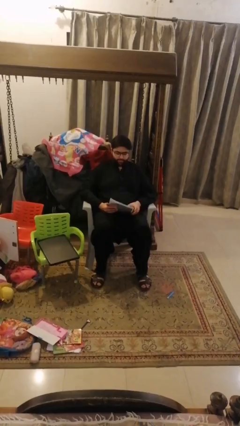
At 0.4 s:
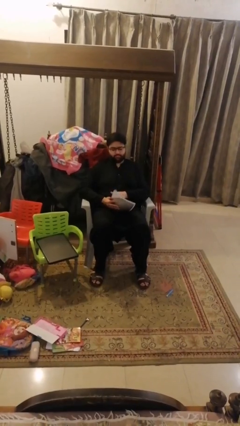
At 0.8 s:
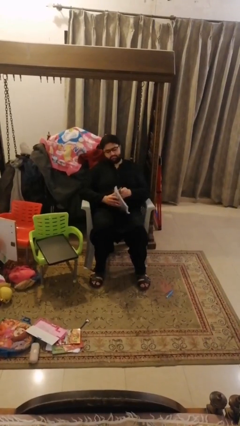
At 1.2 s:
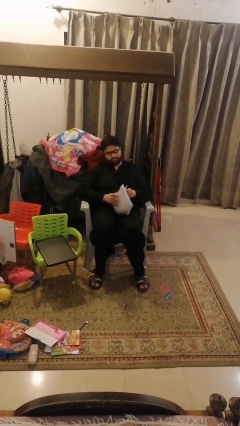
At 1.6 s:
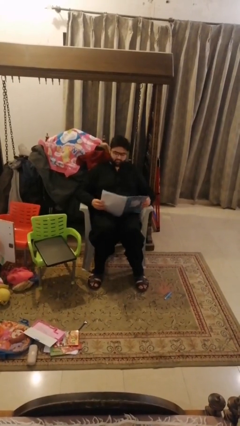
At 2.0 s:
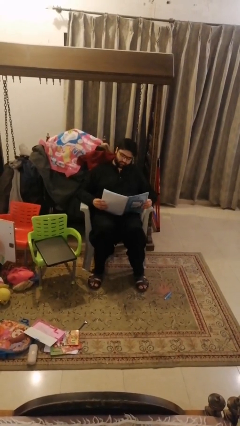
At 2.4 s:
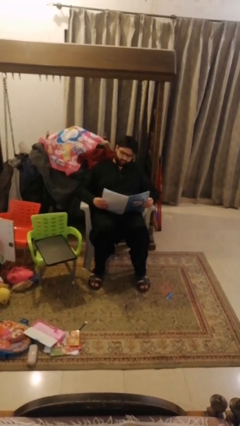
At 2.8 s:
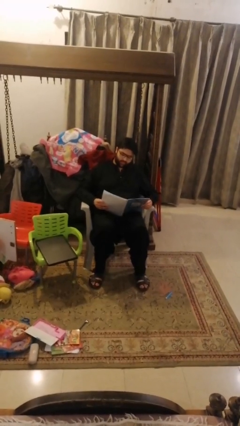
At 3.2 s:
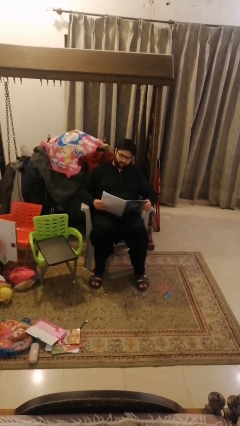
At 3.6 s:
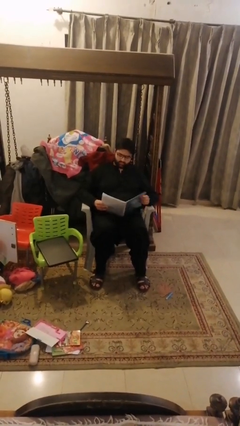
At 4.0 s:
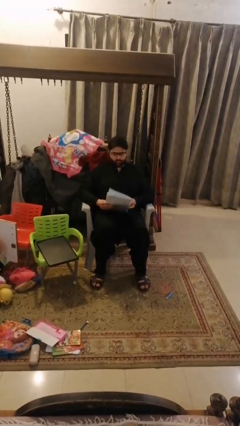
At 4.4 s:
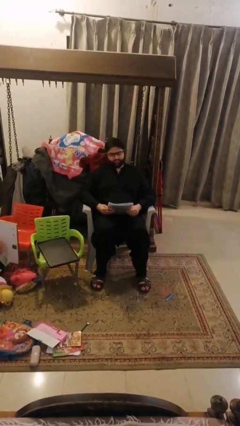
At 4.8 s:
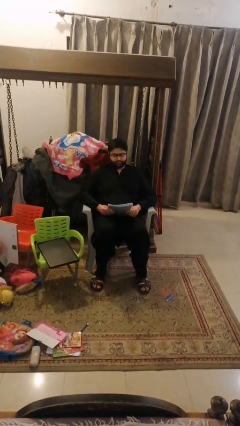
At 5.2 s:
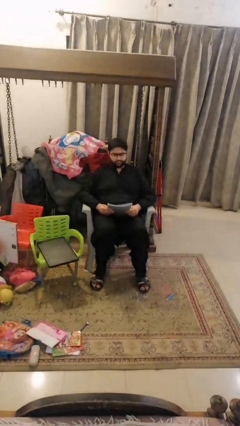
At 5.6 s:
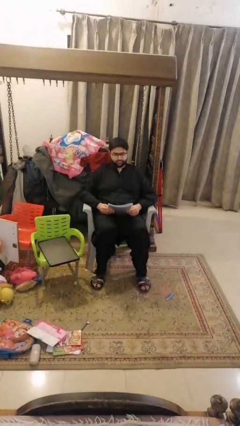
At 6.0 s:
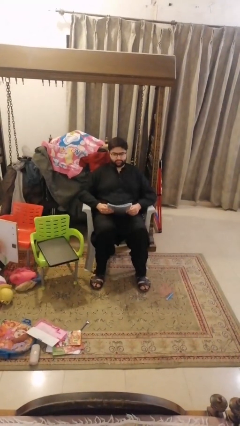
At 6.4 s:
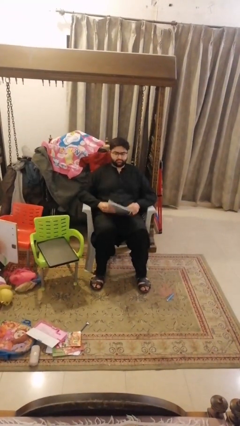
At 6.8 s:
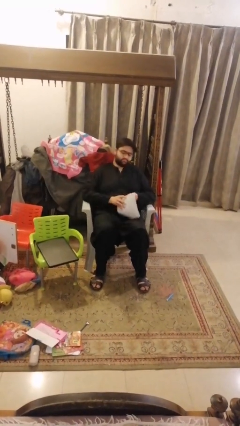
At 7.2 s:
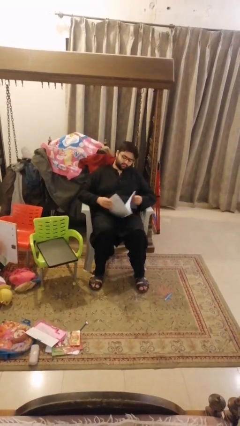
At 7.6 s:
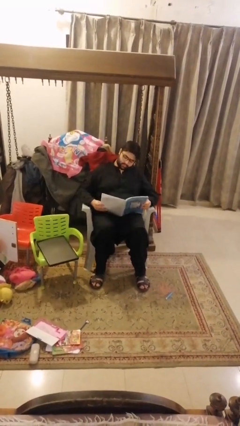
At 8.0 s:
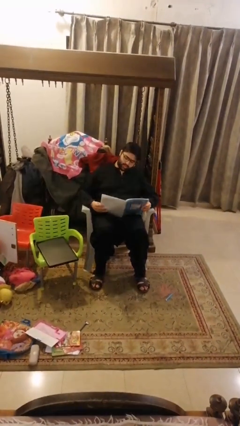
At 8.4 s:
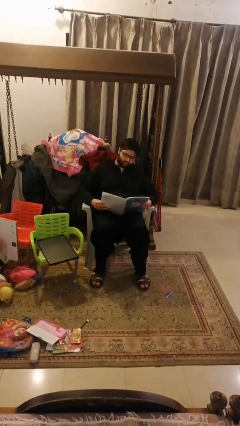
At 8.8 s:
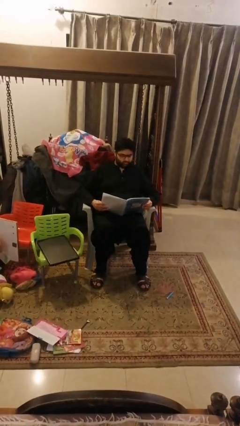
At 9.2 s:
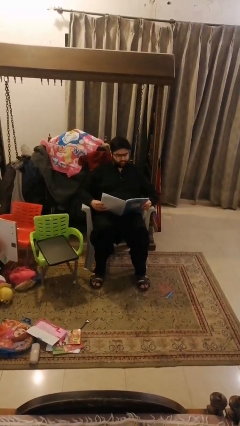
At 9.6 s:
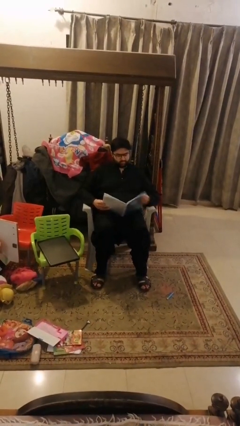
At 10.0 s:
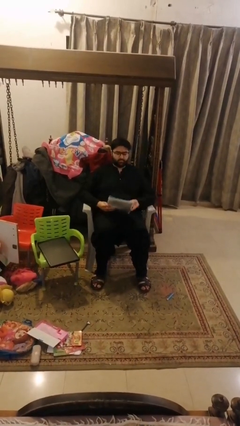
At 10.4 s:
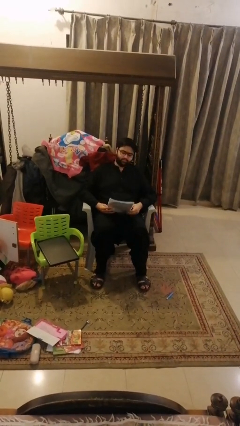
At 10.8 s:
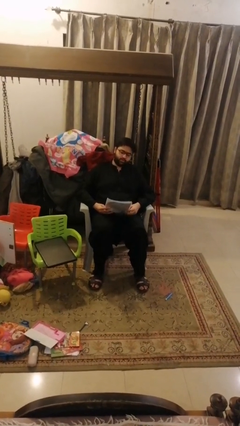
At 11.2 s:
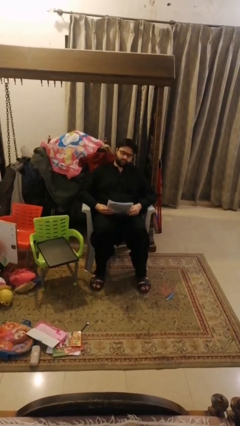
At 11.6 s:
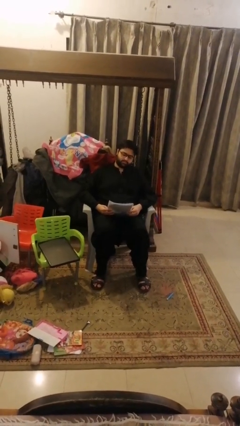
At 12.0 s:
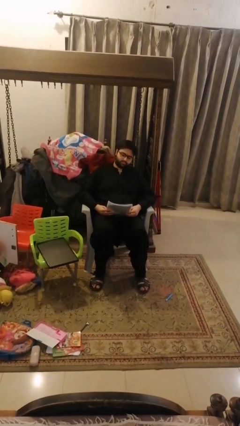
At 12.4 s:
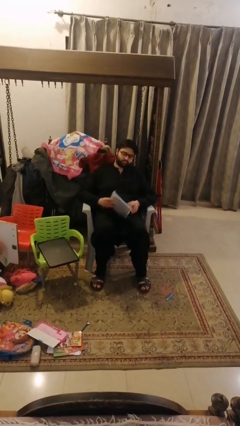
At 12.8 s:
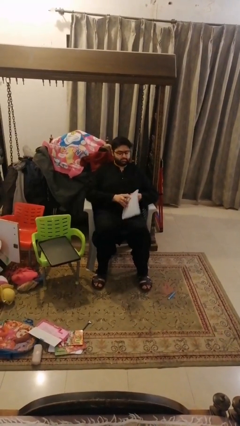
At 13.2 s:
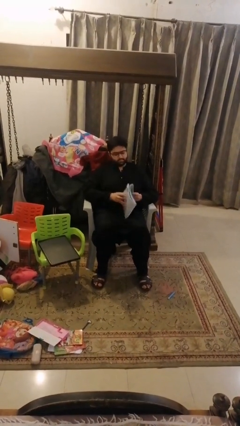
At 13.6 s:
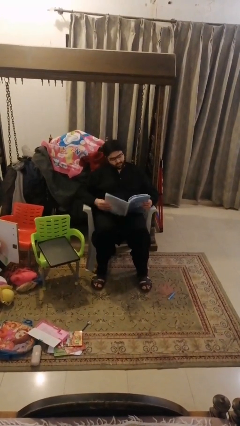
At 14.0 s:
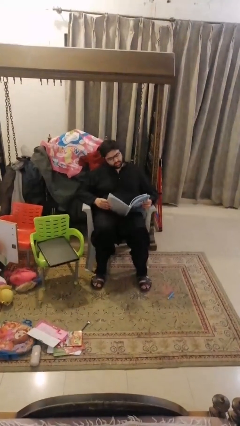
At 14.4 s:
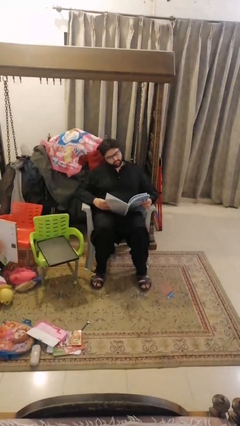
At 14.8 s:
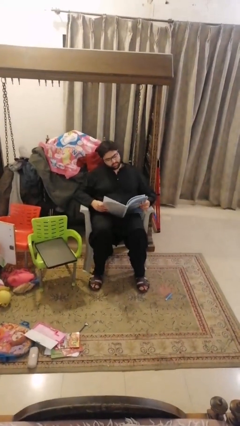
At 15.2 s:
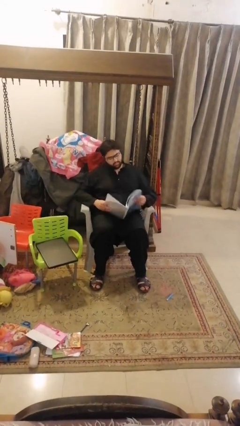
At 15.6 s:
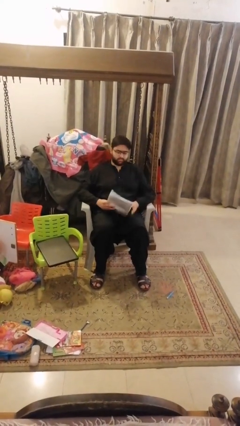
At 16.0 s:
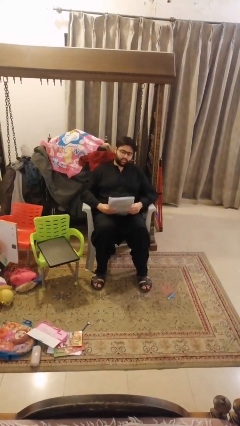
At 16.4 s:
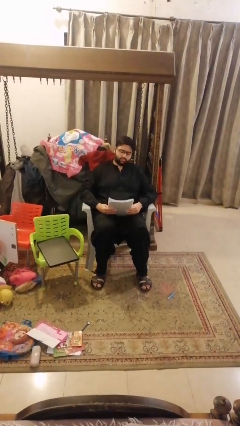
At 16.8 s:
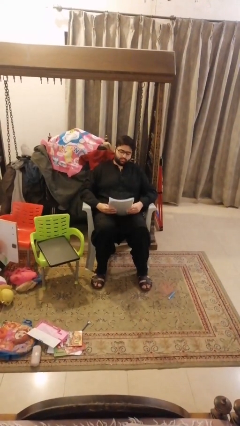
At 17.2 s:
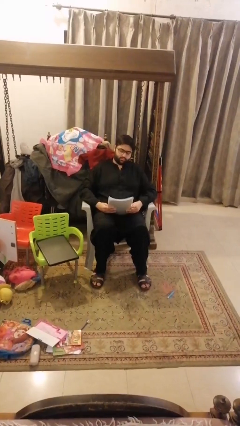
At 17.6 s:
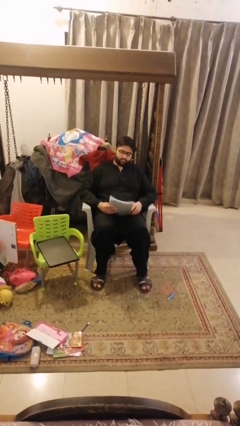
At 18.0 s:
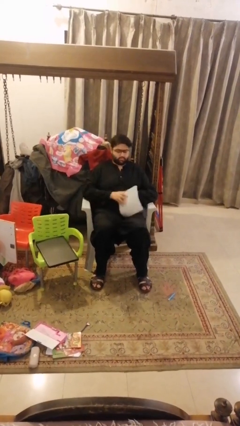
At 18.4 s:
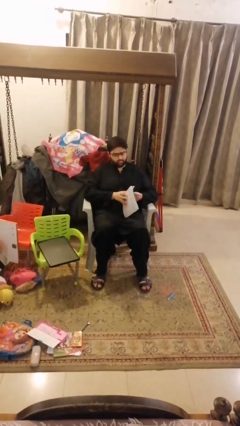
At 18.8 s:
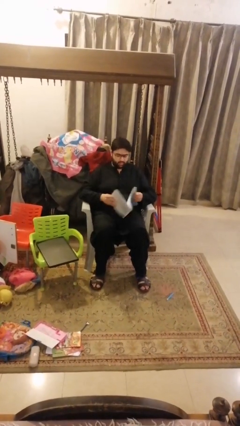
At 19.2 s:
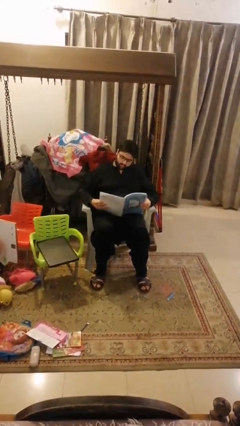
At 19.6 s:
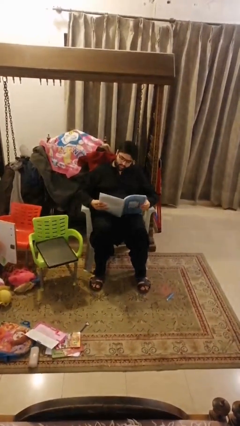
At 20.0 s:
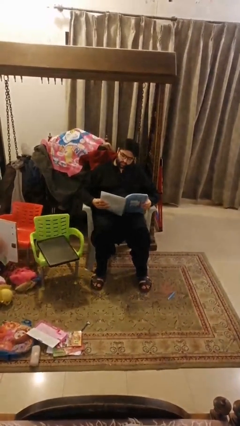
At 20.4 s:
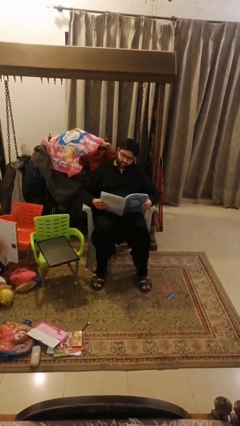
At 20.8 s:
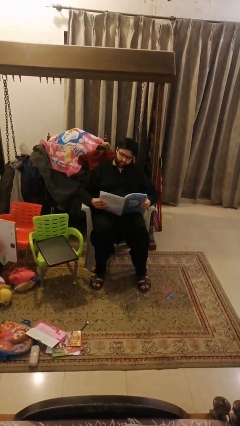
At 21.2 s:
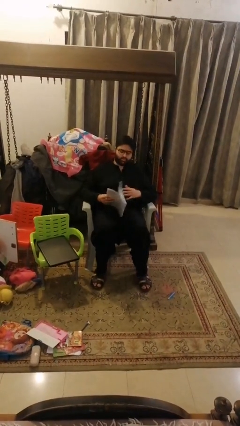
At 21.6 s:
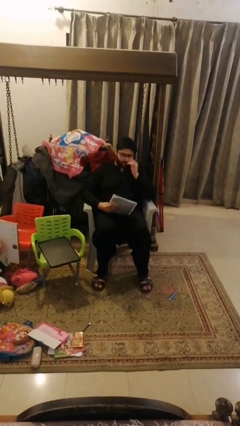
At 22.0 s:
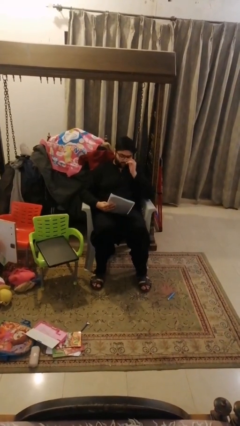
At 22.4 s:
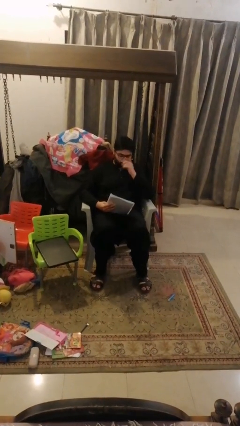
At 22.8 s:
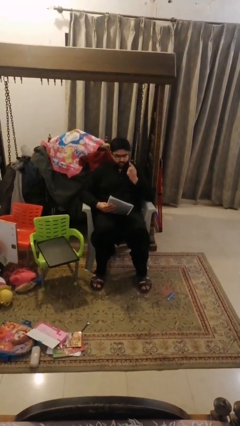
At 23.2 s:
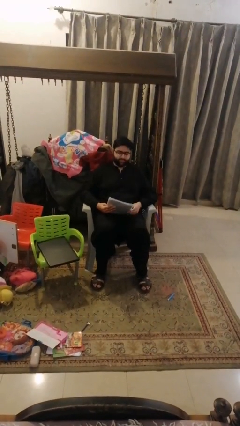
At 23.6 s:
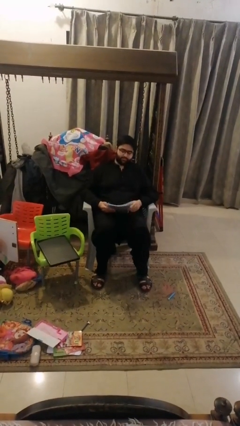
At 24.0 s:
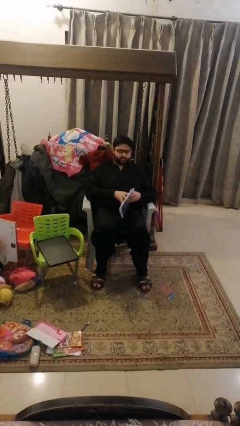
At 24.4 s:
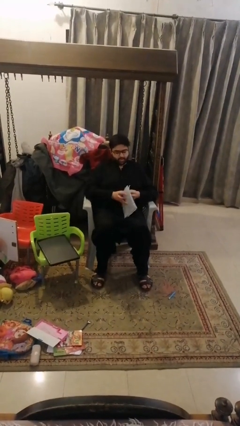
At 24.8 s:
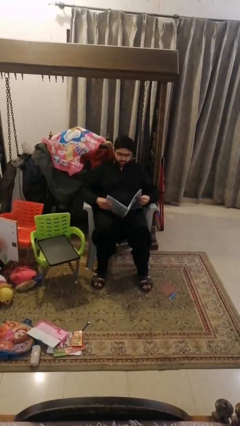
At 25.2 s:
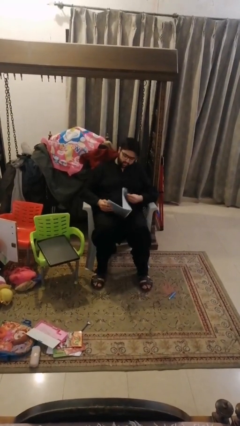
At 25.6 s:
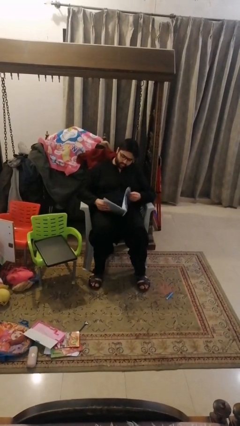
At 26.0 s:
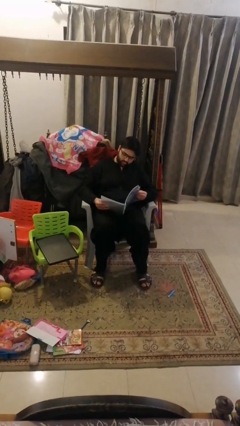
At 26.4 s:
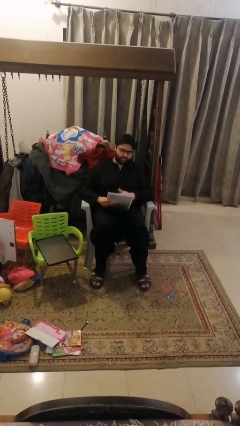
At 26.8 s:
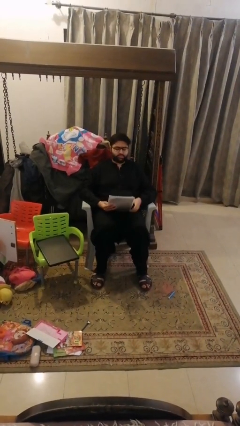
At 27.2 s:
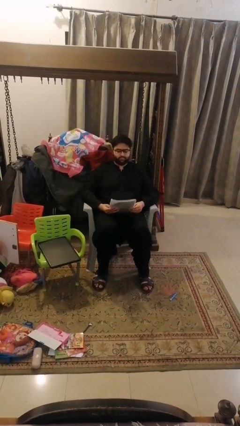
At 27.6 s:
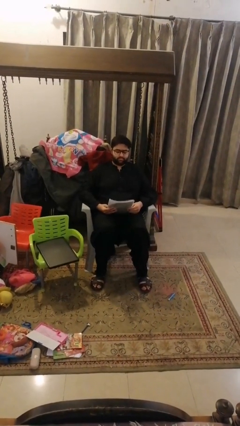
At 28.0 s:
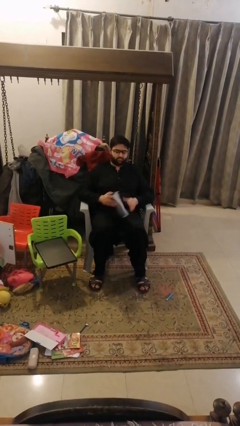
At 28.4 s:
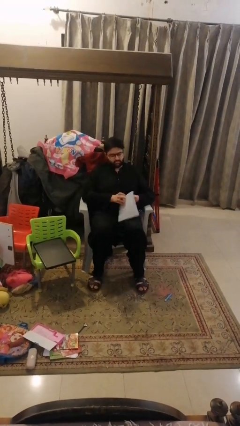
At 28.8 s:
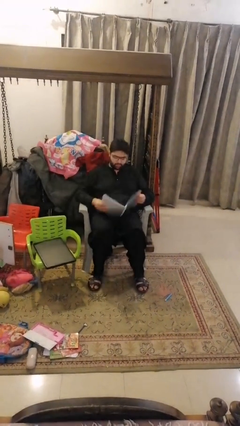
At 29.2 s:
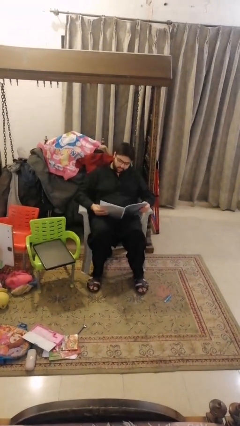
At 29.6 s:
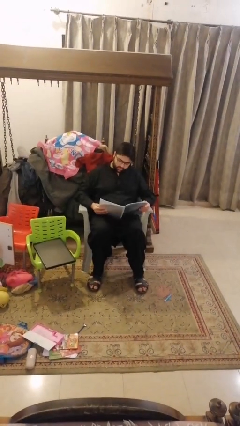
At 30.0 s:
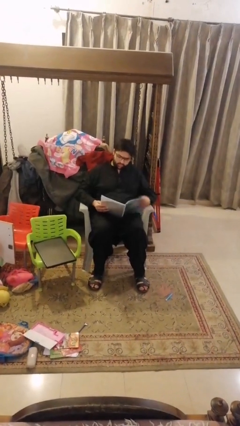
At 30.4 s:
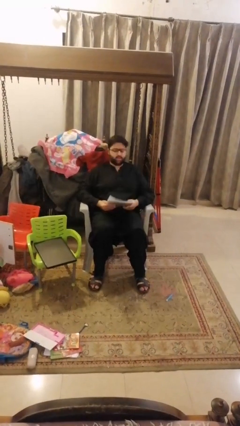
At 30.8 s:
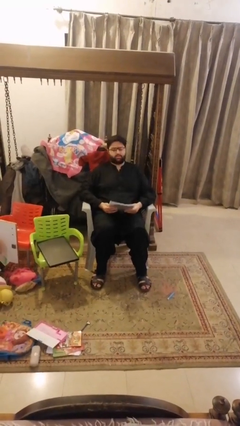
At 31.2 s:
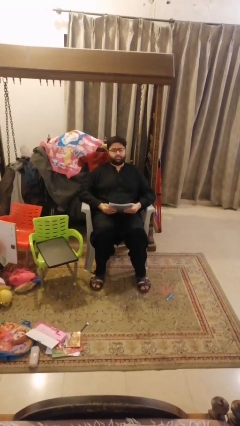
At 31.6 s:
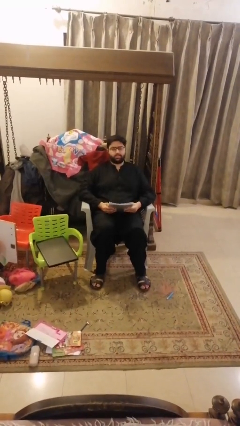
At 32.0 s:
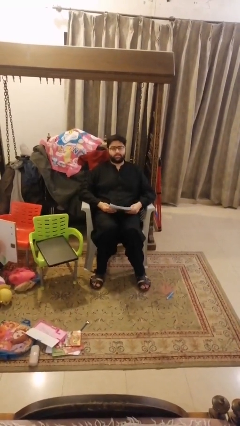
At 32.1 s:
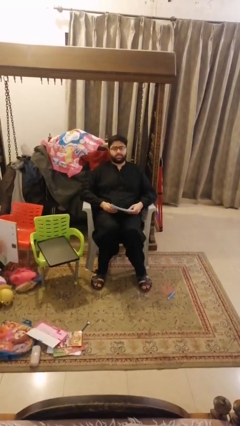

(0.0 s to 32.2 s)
person reads document

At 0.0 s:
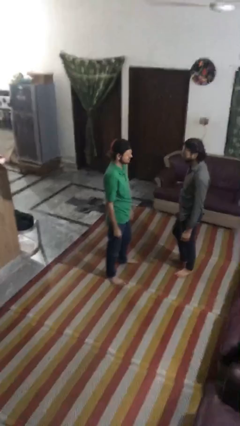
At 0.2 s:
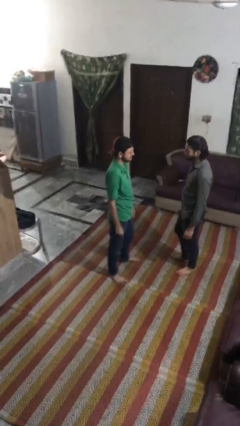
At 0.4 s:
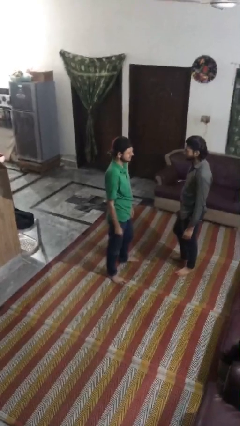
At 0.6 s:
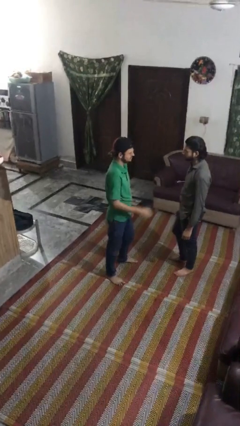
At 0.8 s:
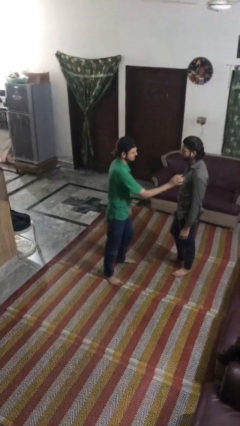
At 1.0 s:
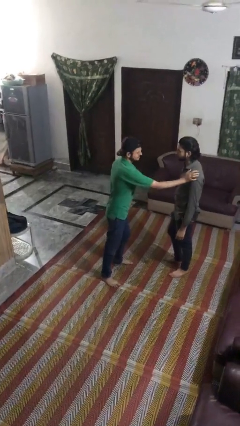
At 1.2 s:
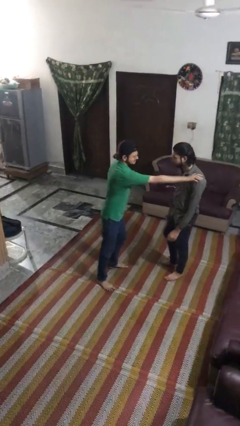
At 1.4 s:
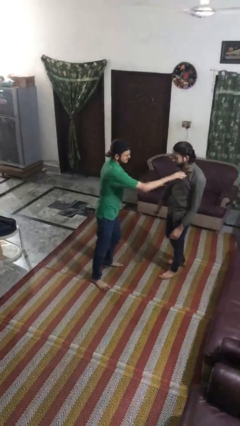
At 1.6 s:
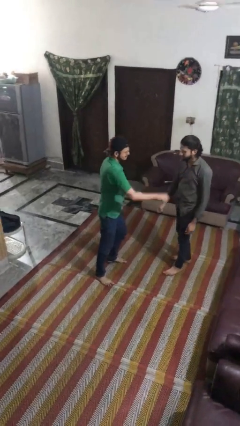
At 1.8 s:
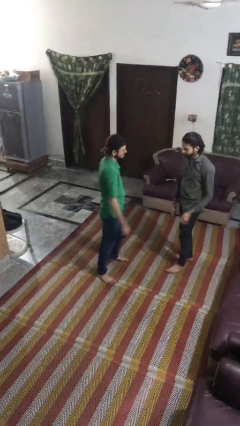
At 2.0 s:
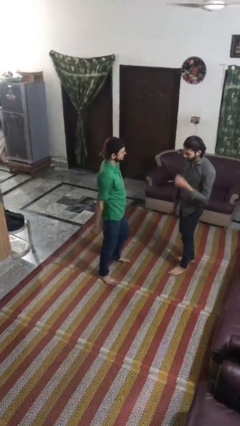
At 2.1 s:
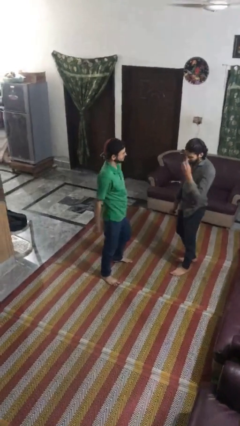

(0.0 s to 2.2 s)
person shoves person
